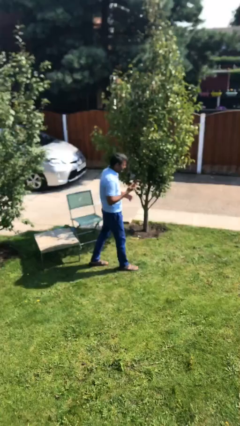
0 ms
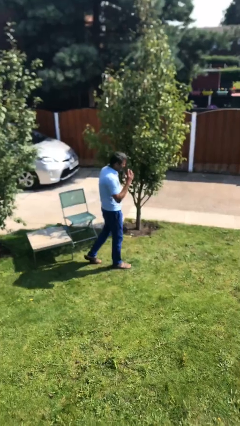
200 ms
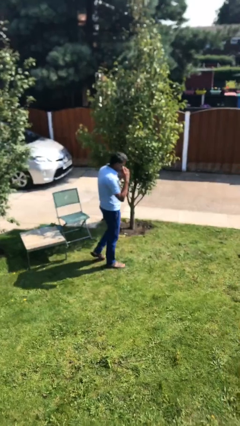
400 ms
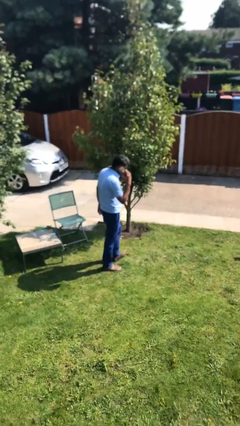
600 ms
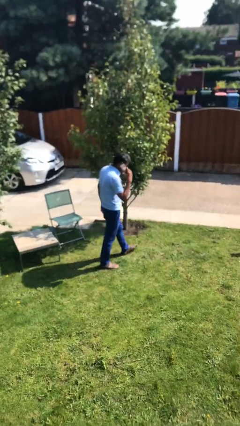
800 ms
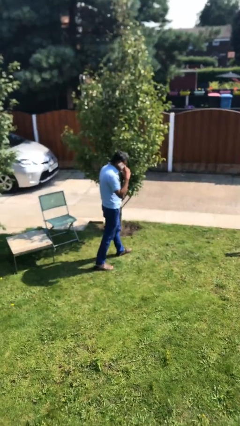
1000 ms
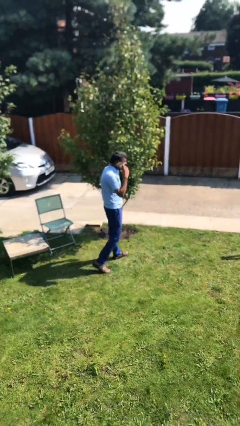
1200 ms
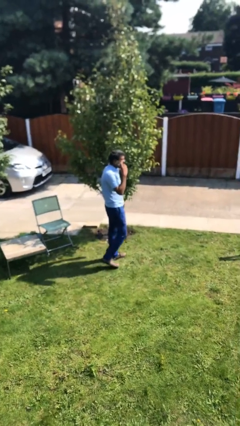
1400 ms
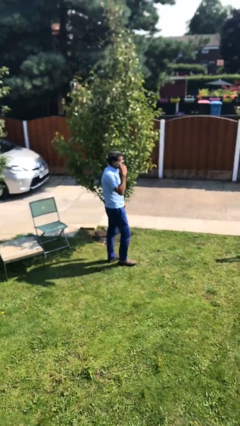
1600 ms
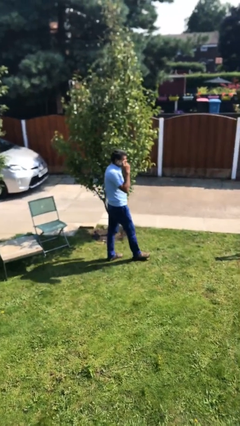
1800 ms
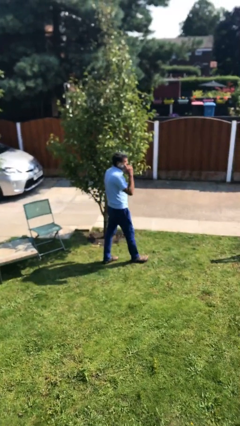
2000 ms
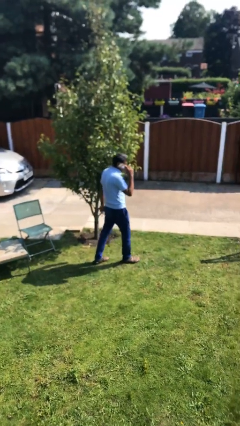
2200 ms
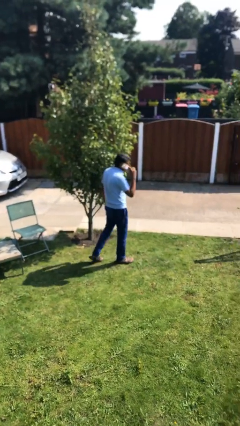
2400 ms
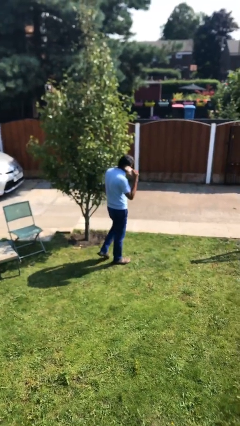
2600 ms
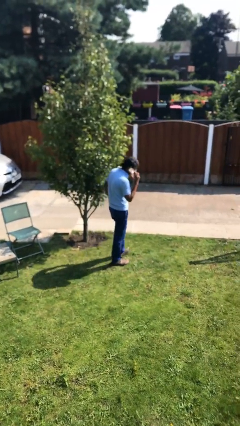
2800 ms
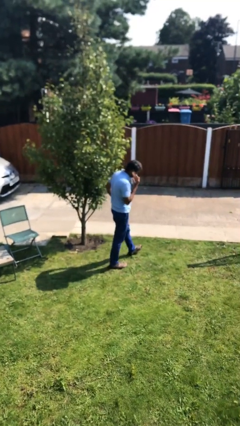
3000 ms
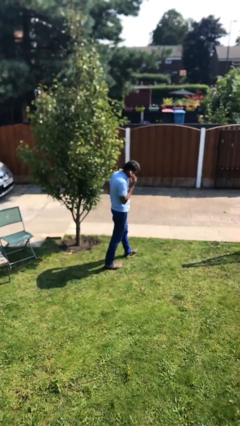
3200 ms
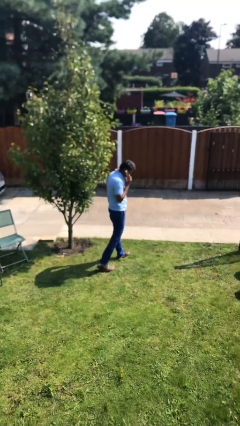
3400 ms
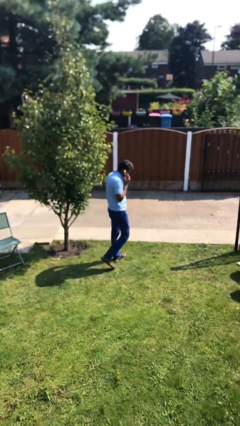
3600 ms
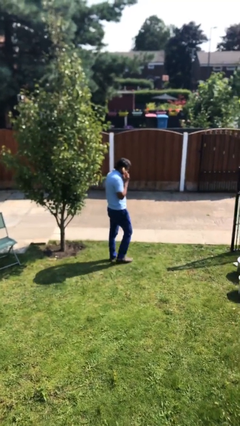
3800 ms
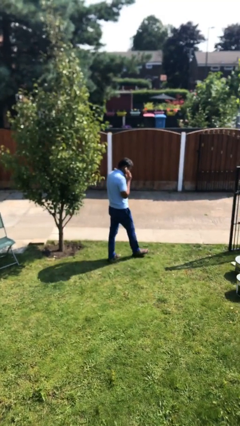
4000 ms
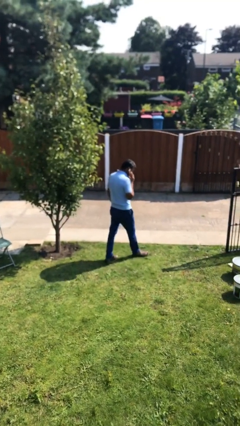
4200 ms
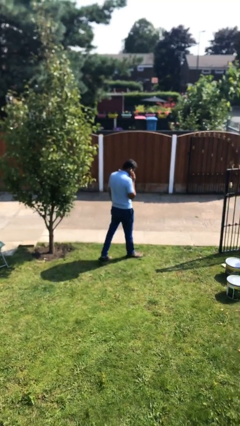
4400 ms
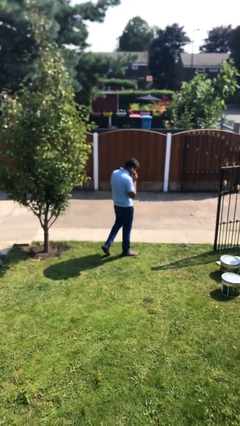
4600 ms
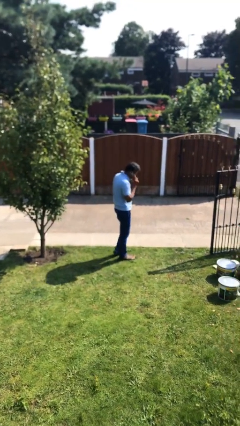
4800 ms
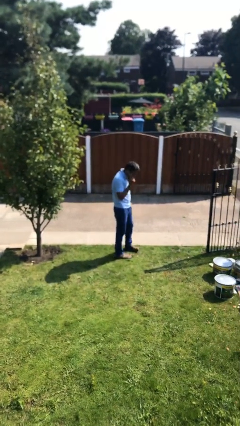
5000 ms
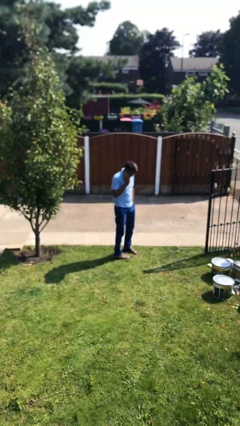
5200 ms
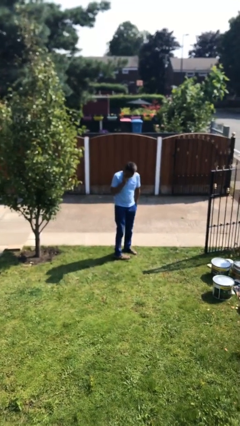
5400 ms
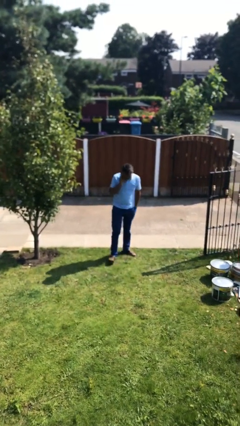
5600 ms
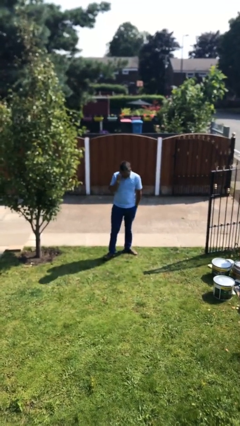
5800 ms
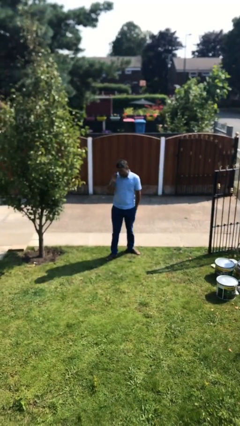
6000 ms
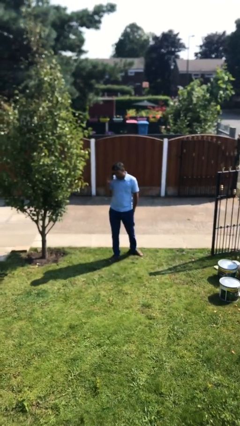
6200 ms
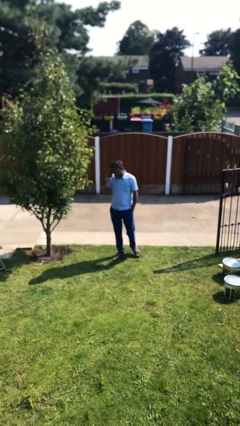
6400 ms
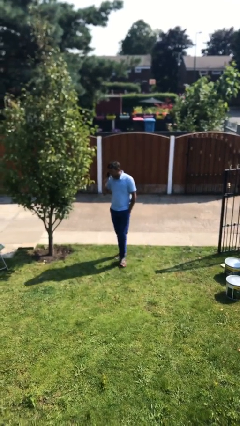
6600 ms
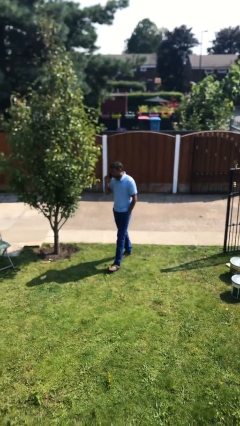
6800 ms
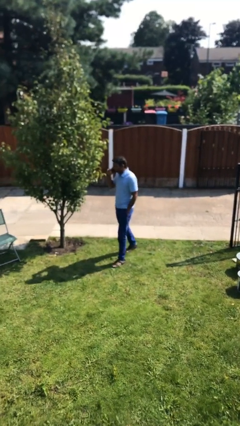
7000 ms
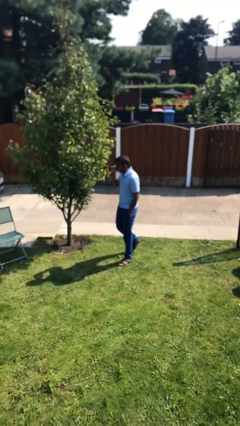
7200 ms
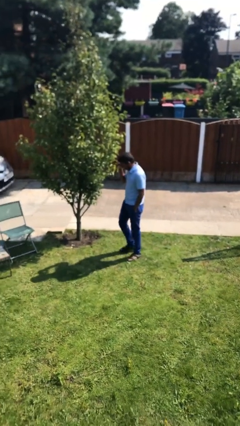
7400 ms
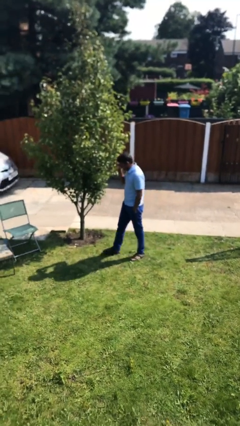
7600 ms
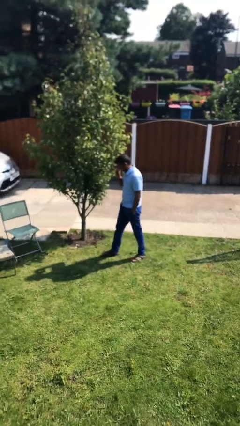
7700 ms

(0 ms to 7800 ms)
person talks on phone

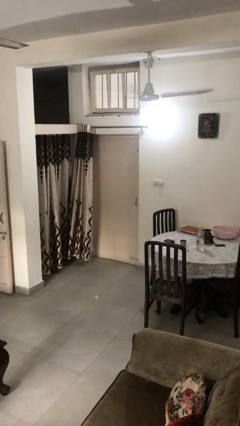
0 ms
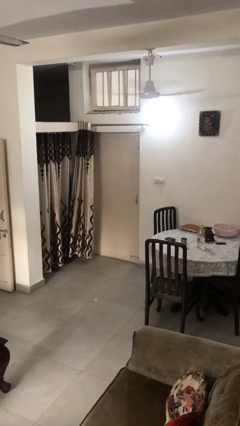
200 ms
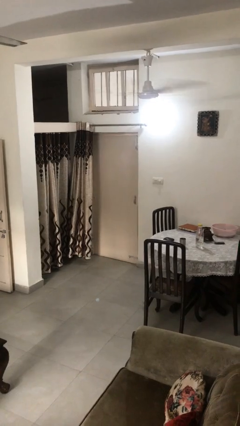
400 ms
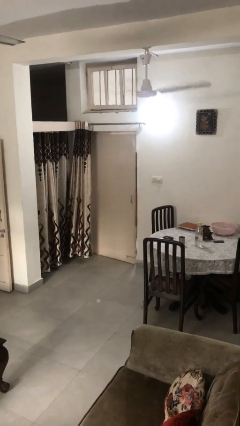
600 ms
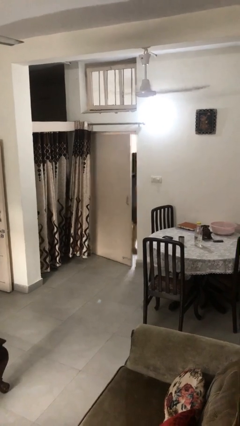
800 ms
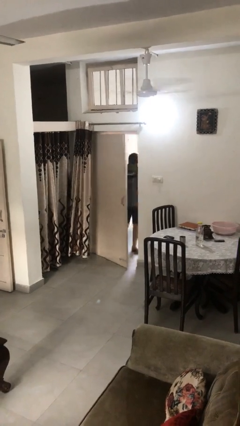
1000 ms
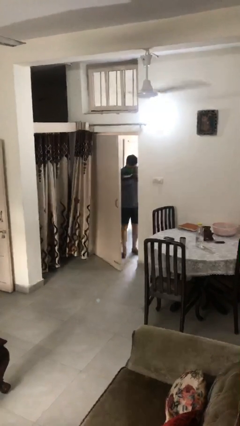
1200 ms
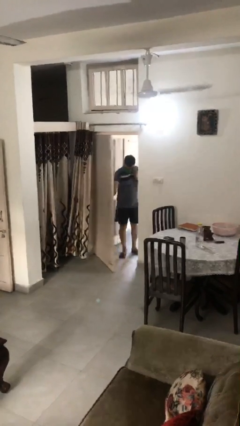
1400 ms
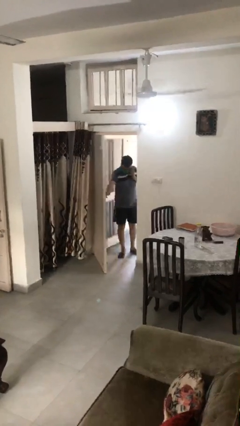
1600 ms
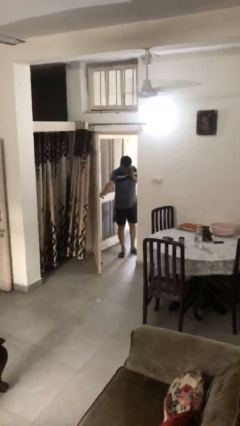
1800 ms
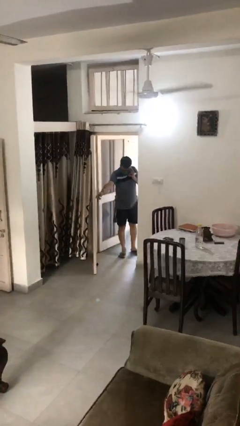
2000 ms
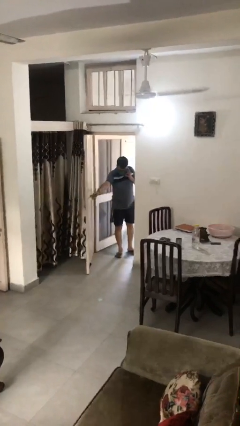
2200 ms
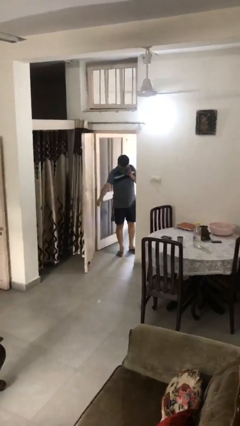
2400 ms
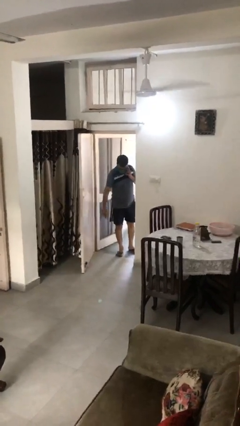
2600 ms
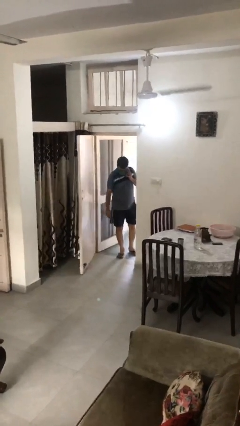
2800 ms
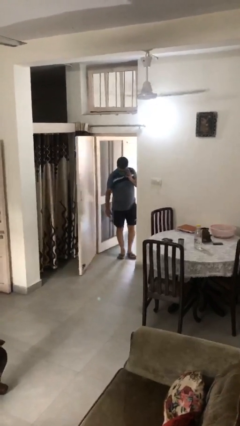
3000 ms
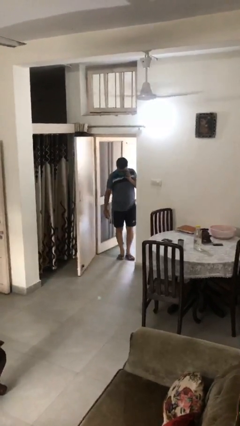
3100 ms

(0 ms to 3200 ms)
person opens facility door

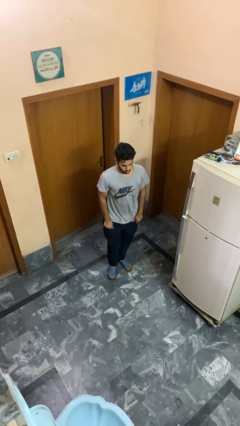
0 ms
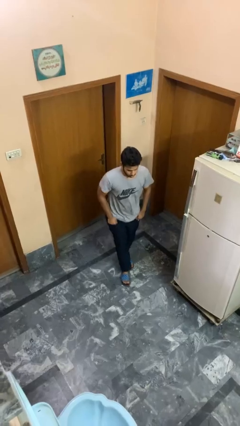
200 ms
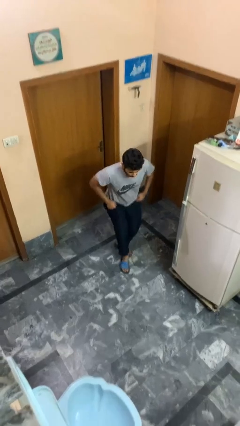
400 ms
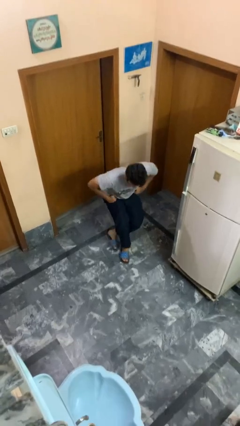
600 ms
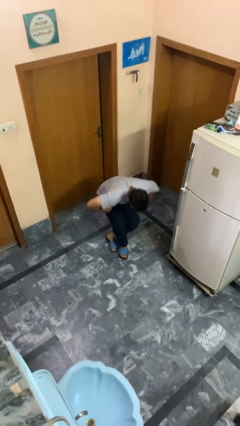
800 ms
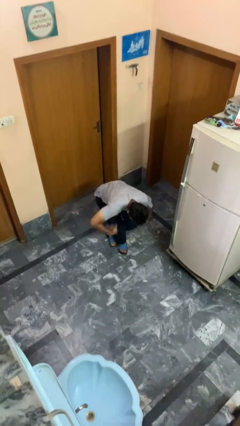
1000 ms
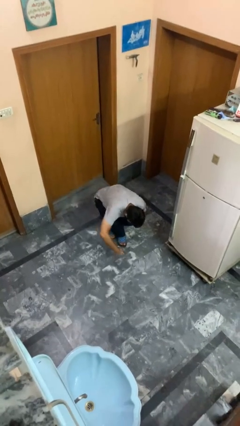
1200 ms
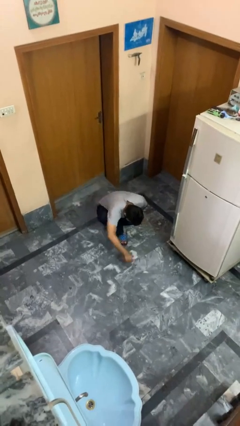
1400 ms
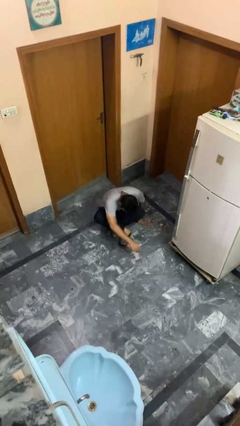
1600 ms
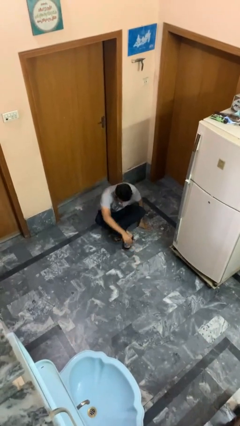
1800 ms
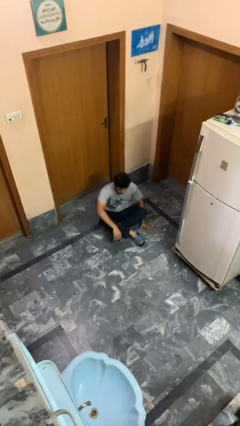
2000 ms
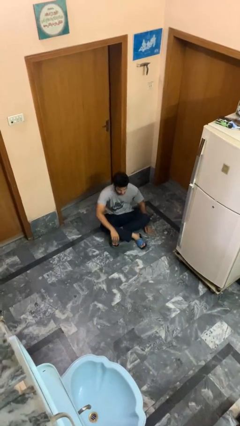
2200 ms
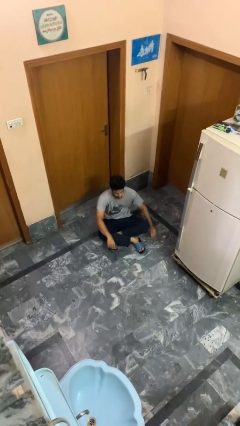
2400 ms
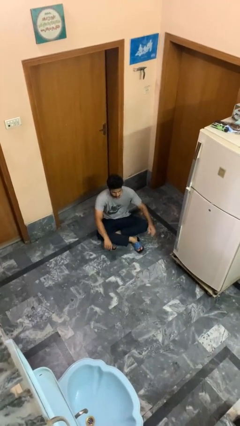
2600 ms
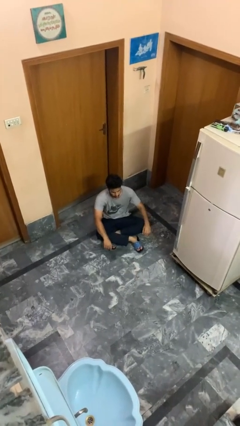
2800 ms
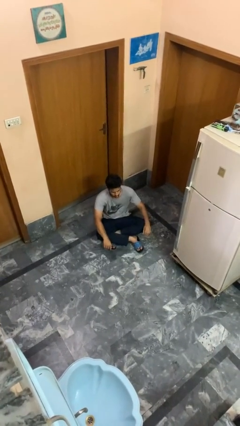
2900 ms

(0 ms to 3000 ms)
person sits crisscross

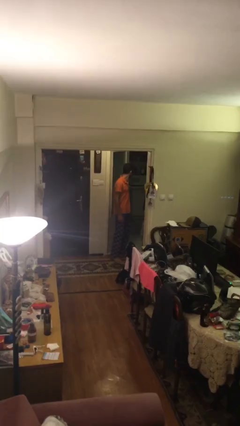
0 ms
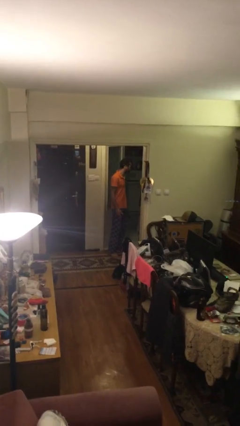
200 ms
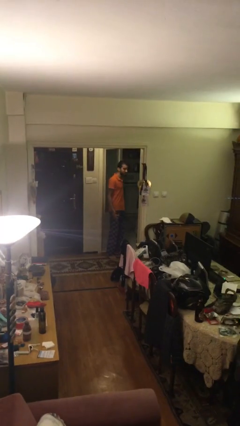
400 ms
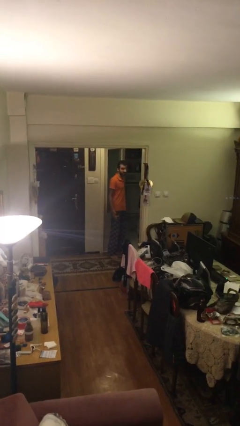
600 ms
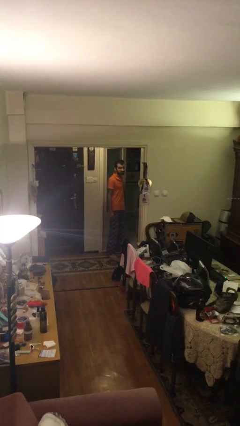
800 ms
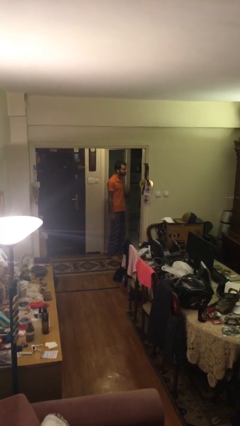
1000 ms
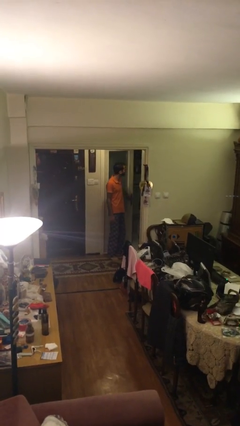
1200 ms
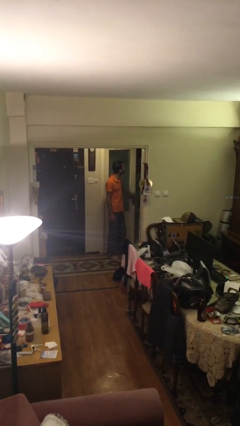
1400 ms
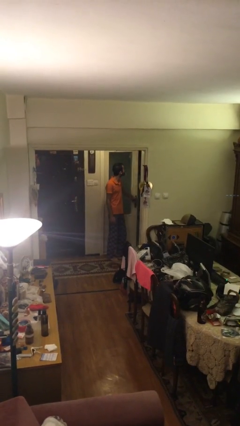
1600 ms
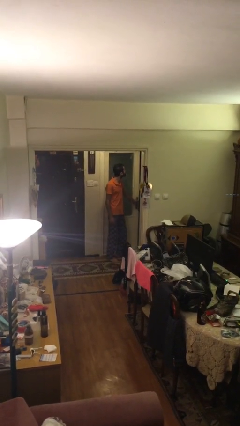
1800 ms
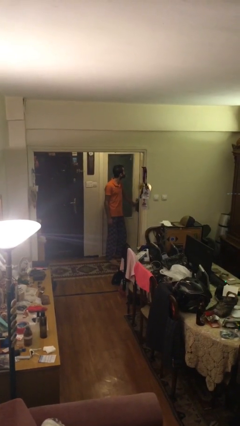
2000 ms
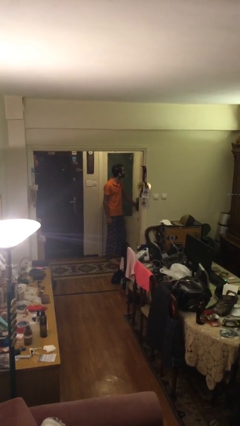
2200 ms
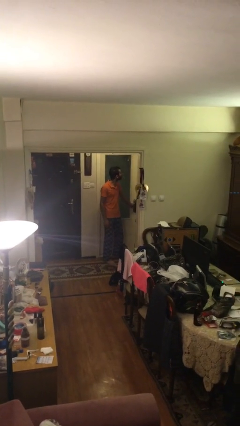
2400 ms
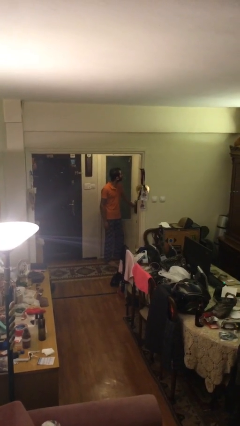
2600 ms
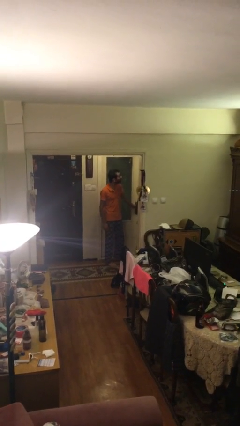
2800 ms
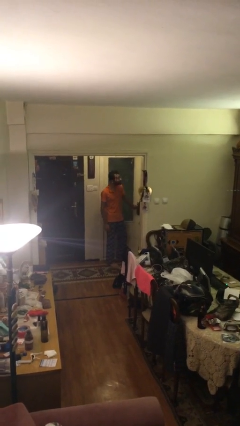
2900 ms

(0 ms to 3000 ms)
person closes facility door

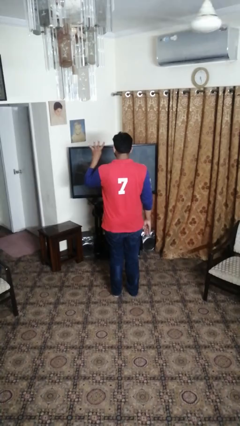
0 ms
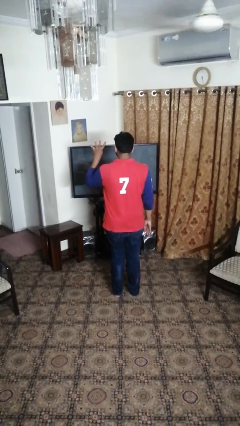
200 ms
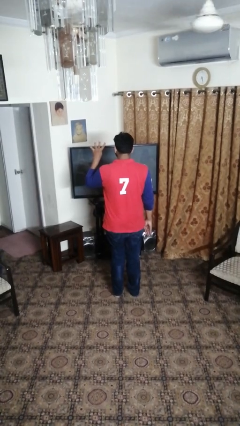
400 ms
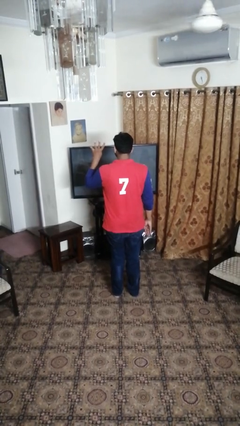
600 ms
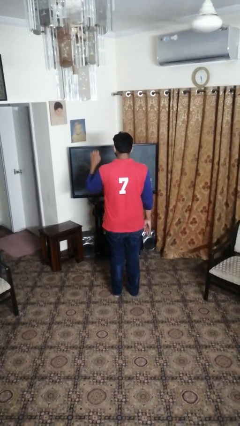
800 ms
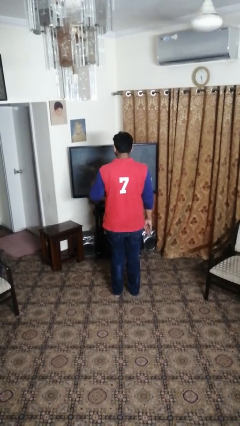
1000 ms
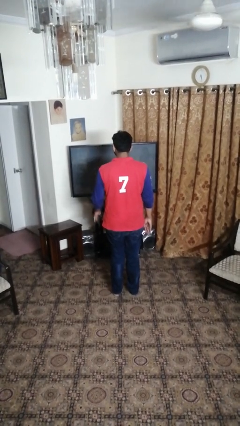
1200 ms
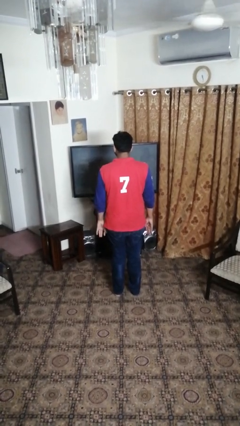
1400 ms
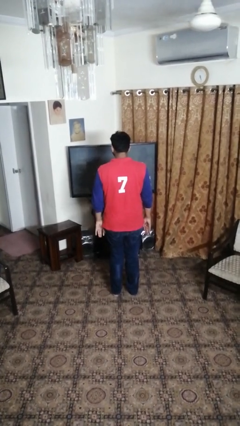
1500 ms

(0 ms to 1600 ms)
person gestures number four
